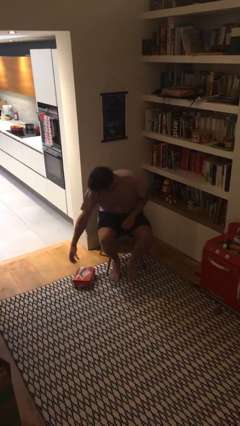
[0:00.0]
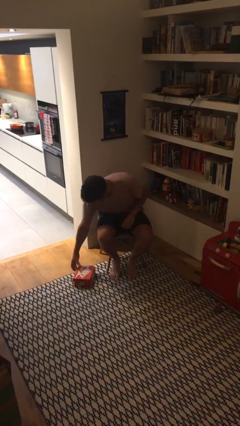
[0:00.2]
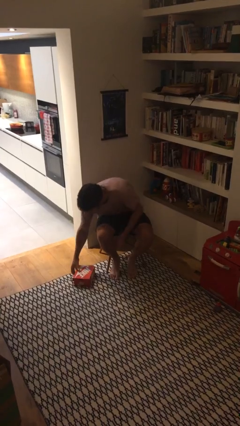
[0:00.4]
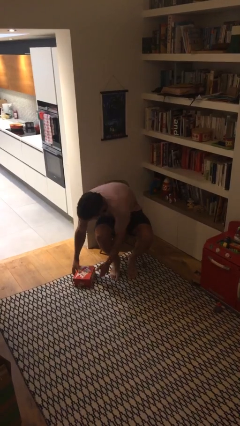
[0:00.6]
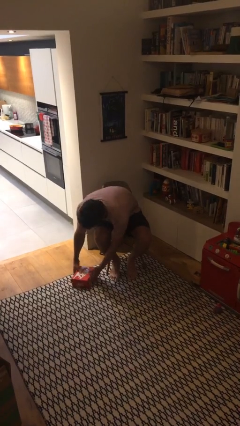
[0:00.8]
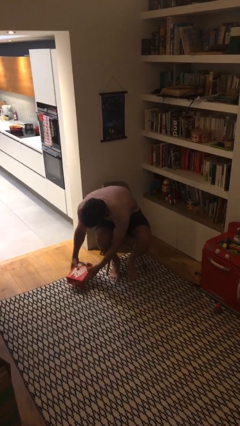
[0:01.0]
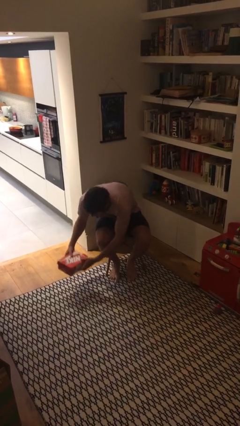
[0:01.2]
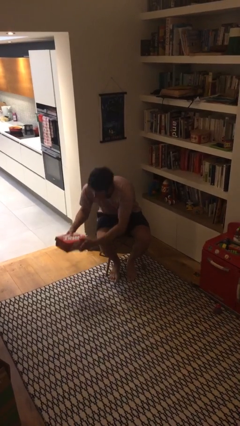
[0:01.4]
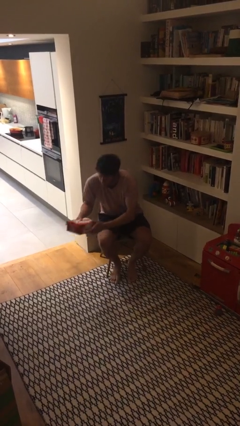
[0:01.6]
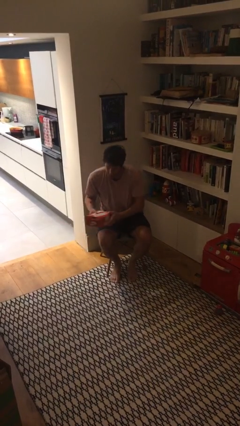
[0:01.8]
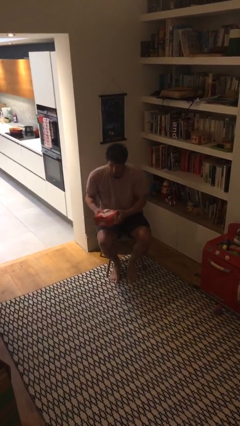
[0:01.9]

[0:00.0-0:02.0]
person picks up object from floor

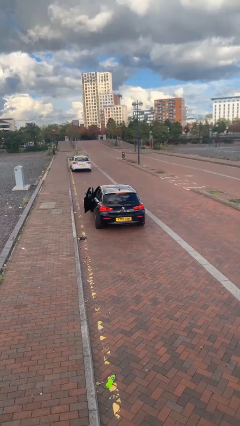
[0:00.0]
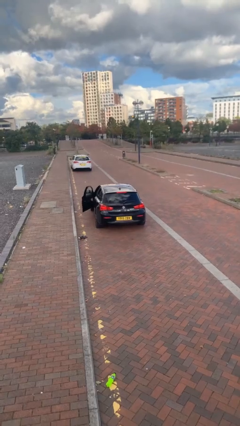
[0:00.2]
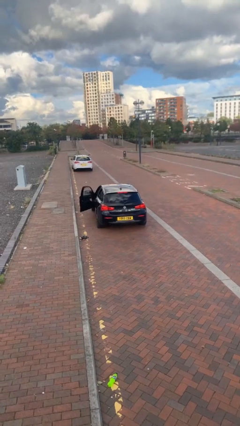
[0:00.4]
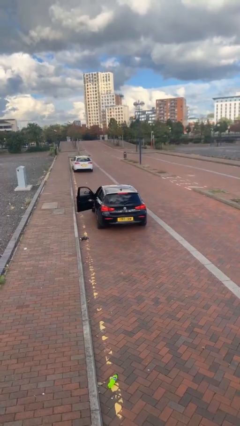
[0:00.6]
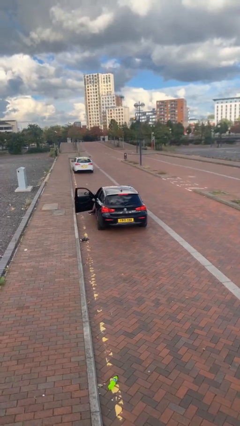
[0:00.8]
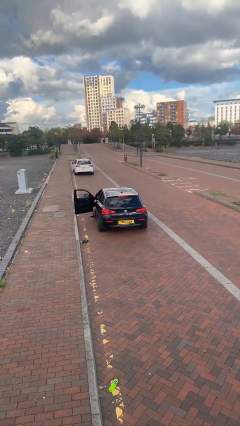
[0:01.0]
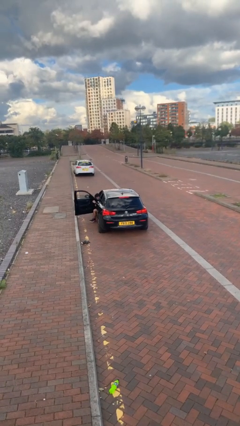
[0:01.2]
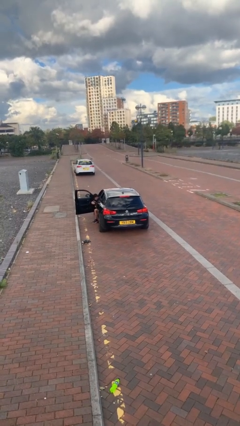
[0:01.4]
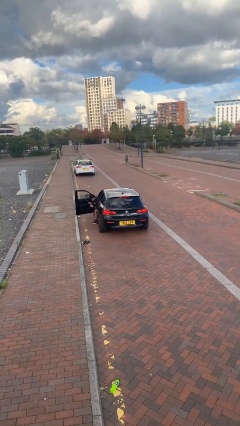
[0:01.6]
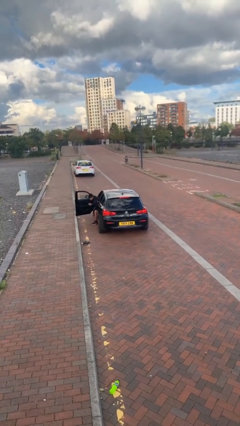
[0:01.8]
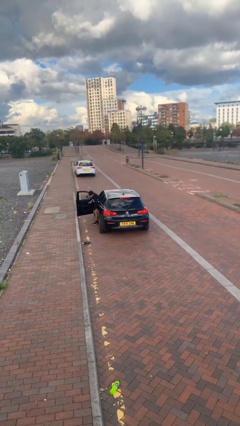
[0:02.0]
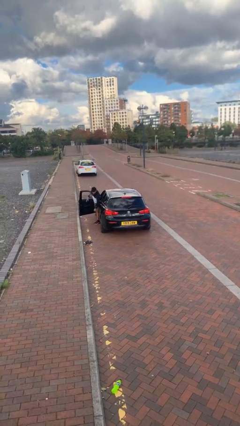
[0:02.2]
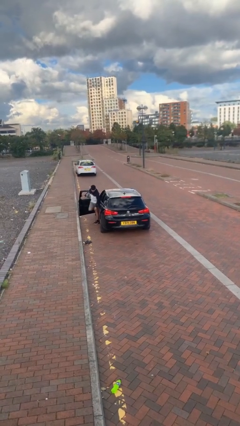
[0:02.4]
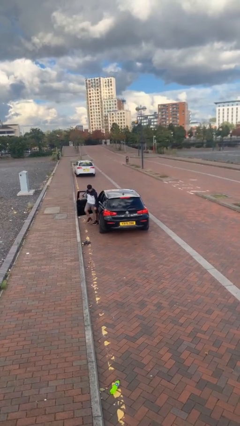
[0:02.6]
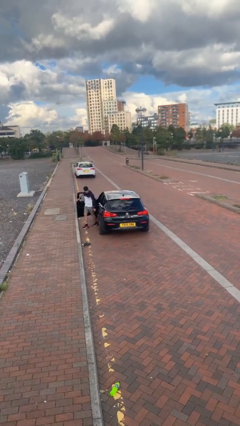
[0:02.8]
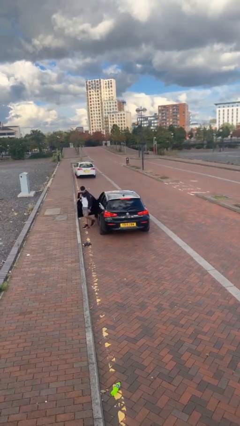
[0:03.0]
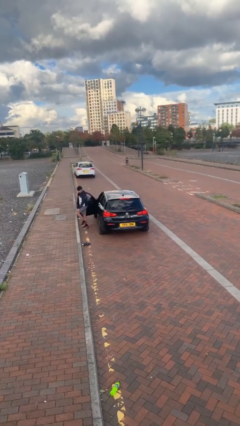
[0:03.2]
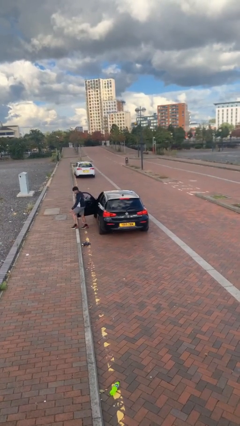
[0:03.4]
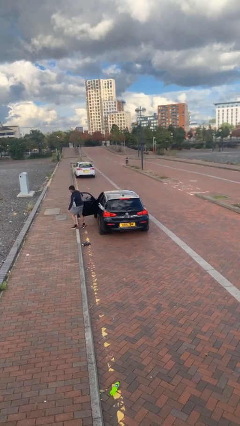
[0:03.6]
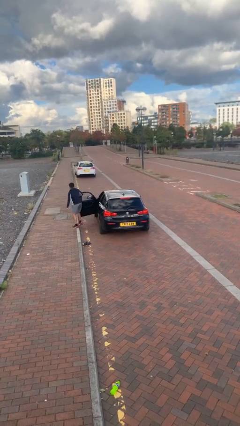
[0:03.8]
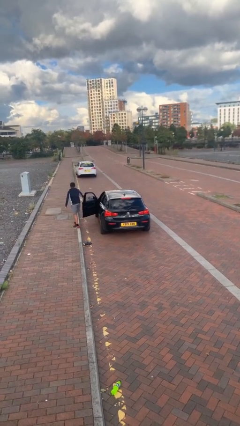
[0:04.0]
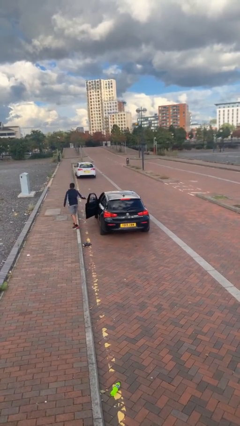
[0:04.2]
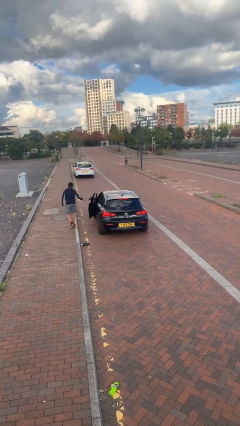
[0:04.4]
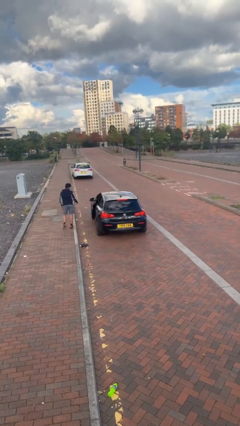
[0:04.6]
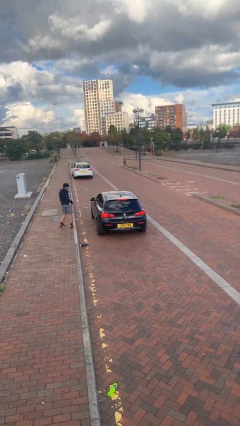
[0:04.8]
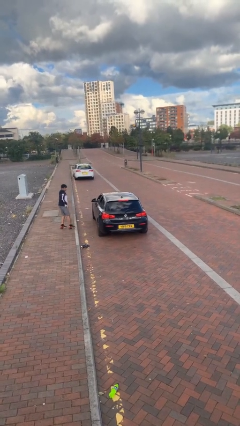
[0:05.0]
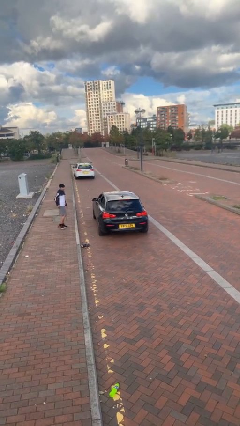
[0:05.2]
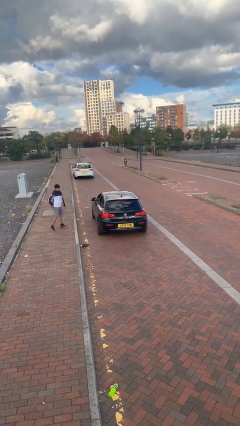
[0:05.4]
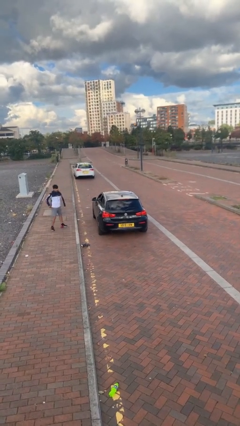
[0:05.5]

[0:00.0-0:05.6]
car drops off person

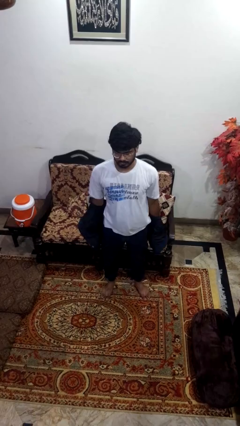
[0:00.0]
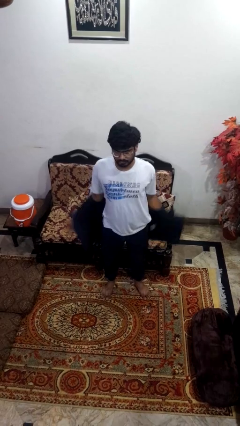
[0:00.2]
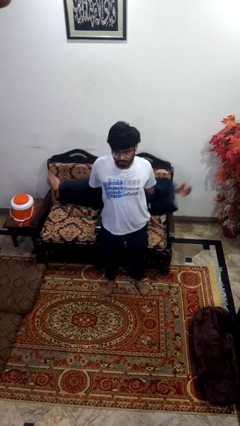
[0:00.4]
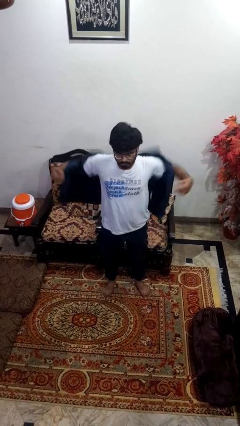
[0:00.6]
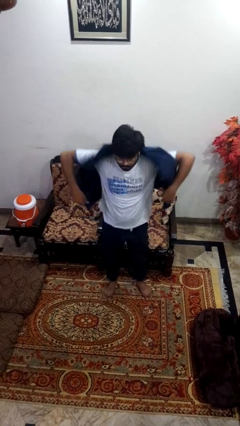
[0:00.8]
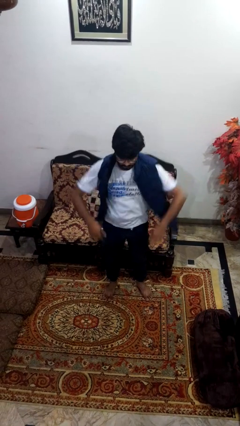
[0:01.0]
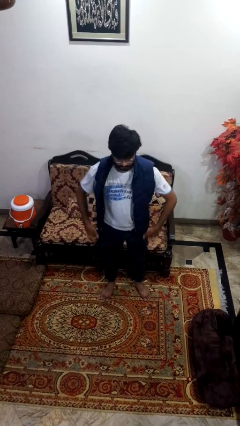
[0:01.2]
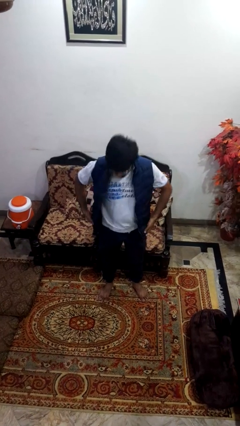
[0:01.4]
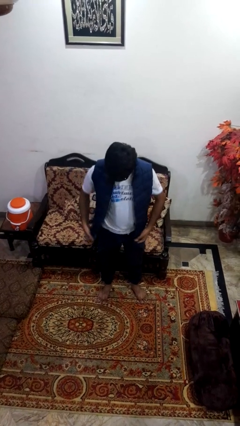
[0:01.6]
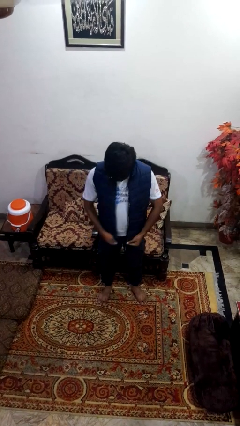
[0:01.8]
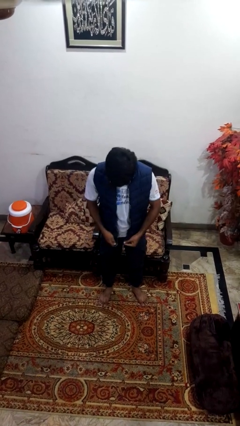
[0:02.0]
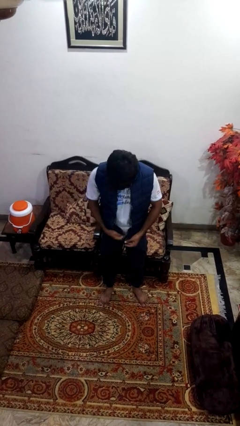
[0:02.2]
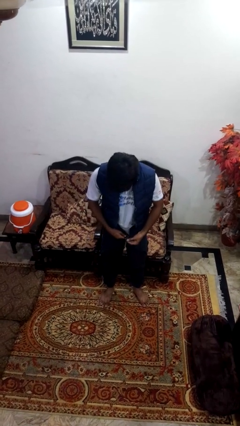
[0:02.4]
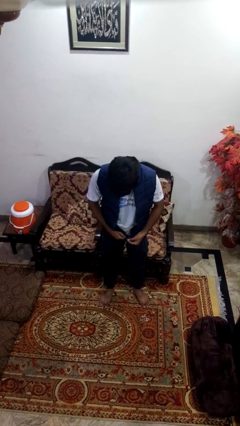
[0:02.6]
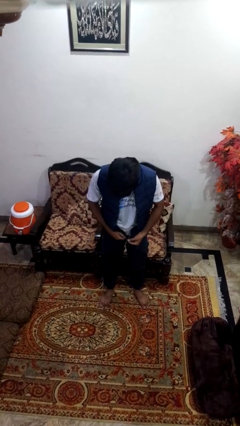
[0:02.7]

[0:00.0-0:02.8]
person puts on jacket

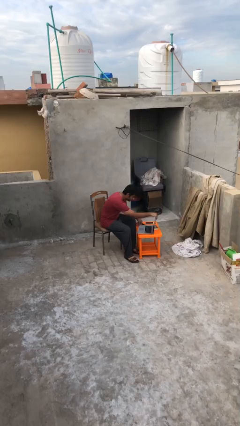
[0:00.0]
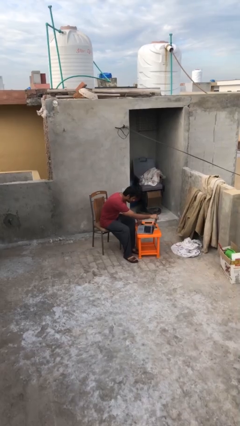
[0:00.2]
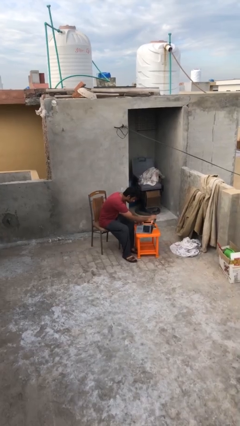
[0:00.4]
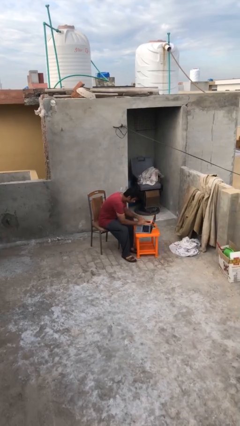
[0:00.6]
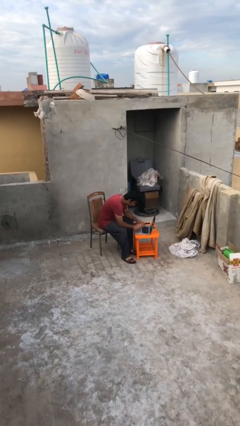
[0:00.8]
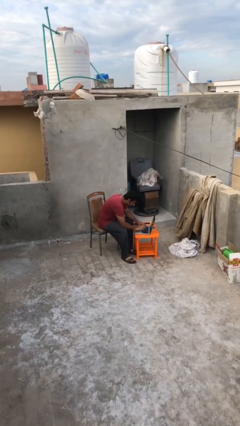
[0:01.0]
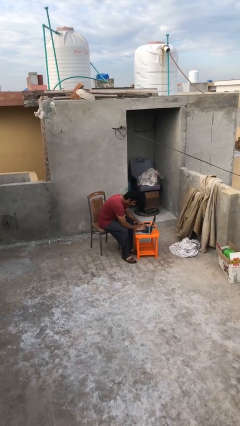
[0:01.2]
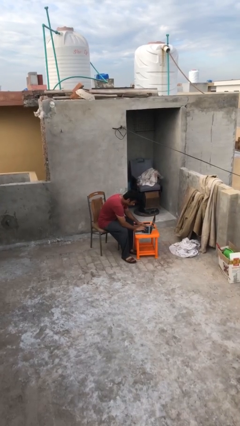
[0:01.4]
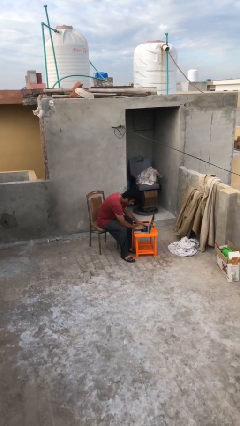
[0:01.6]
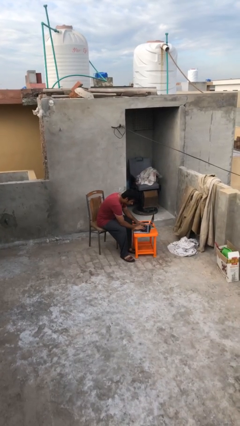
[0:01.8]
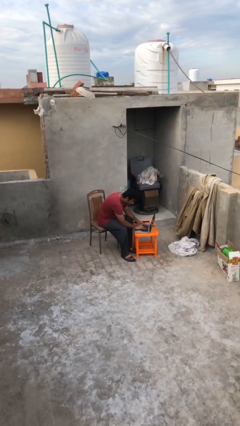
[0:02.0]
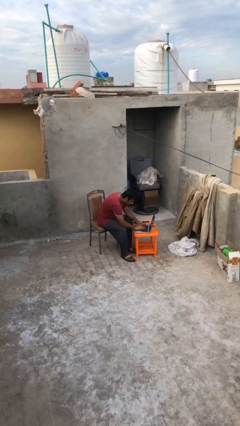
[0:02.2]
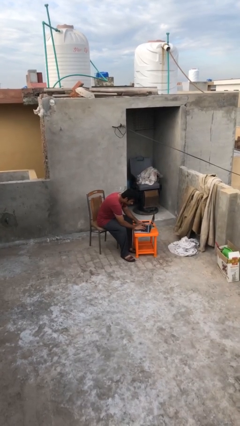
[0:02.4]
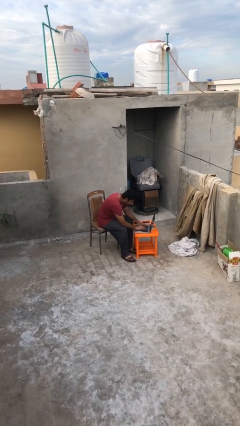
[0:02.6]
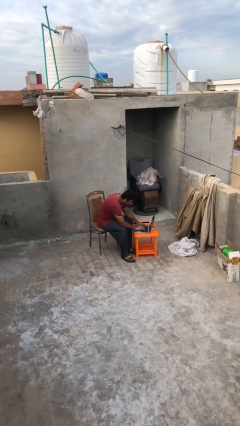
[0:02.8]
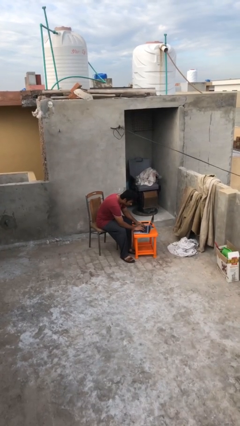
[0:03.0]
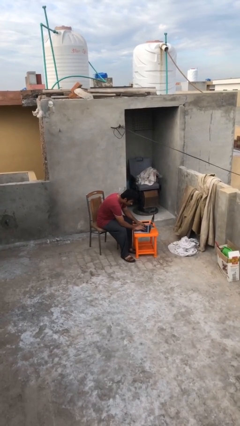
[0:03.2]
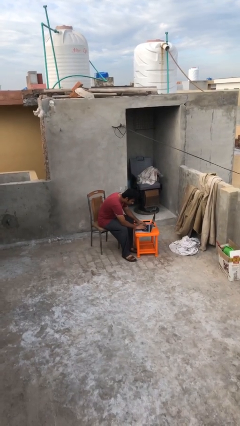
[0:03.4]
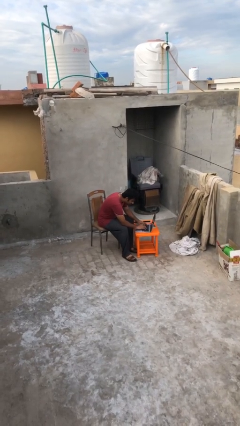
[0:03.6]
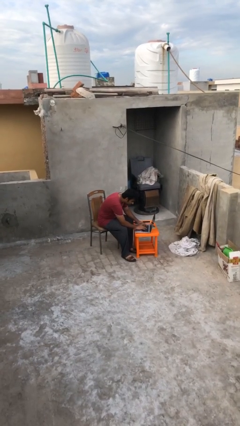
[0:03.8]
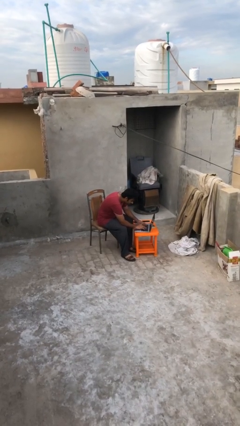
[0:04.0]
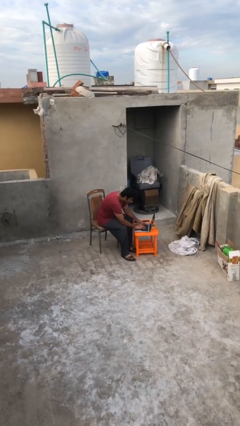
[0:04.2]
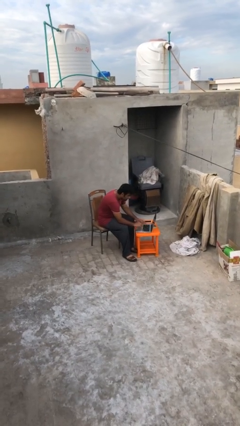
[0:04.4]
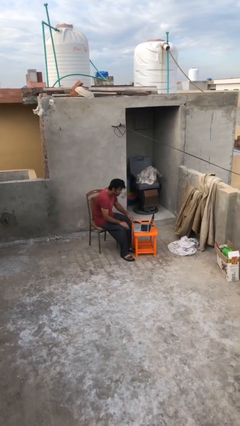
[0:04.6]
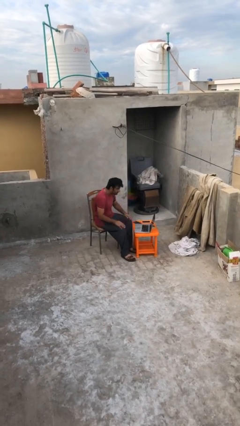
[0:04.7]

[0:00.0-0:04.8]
person interacts with laptop

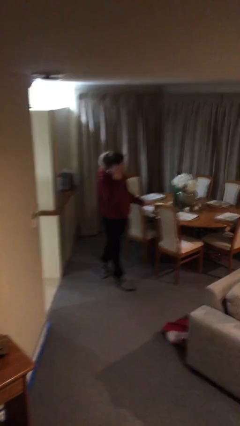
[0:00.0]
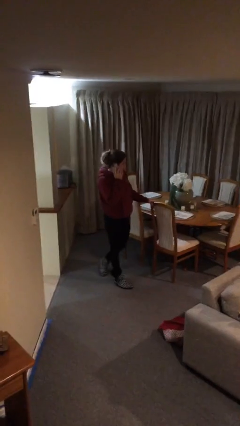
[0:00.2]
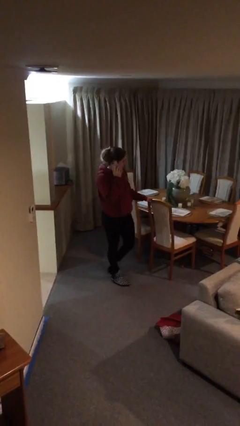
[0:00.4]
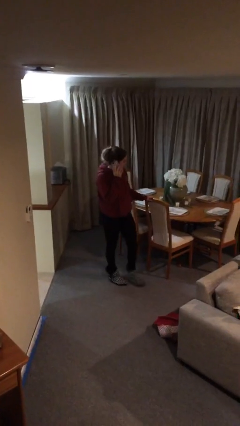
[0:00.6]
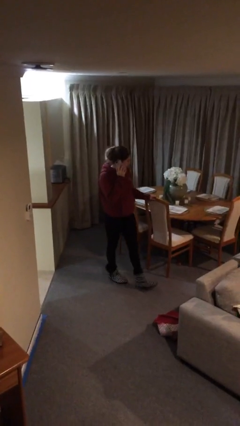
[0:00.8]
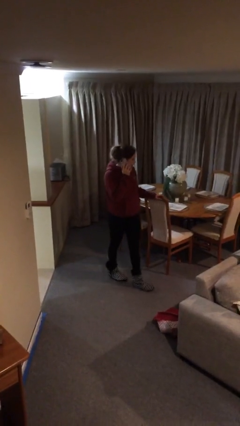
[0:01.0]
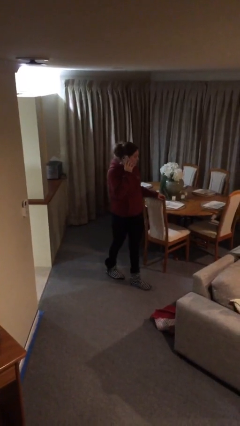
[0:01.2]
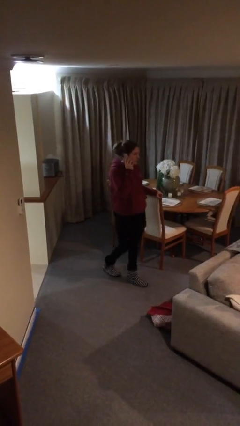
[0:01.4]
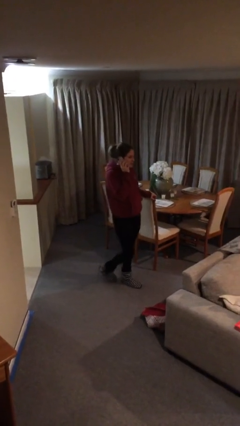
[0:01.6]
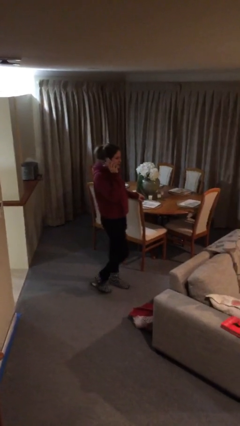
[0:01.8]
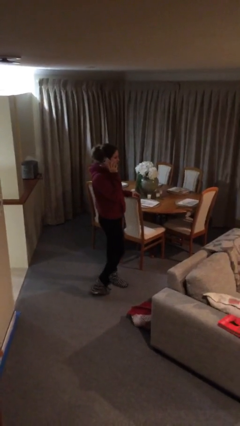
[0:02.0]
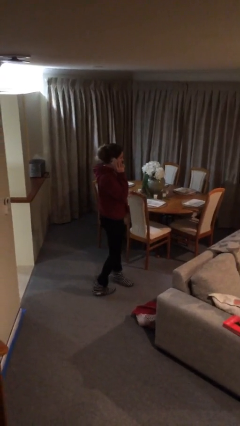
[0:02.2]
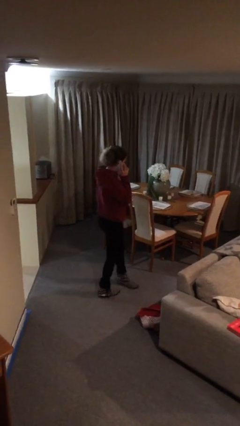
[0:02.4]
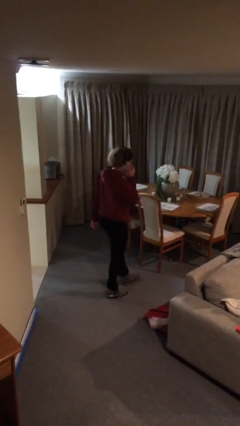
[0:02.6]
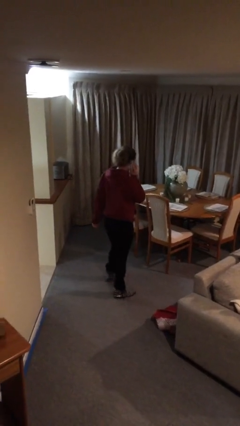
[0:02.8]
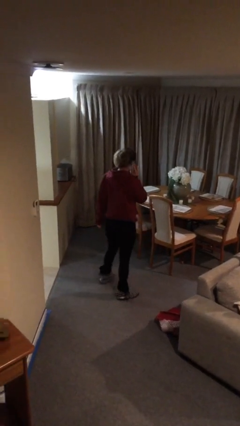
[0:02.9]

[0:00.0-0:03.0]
person talks on phone
